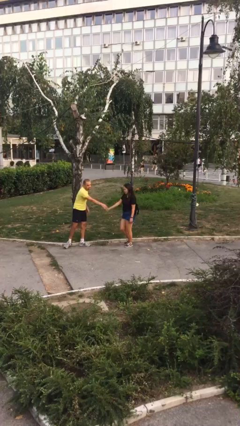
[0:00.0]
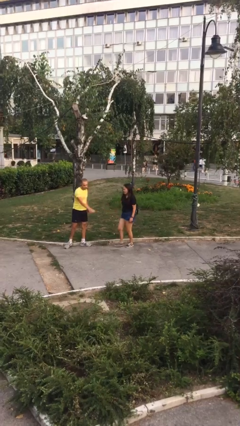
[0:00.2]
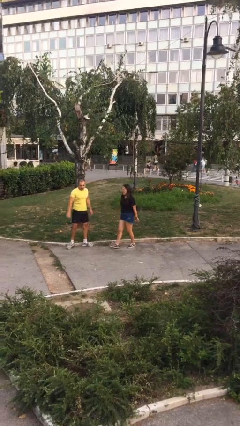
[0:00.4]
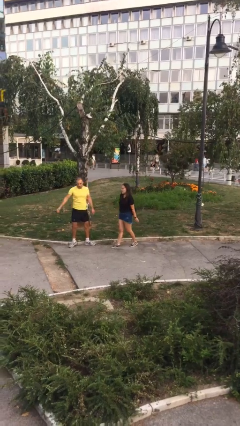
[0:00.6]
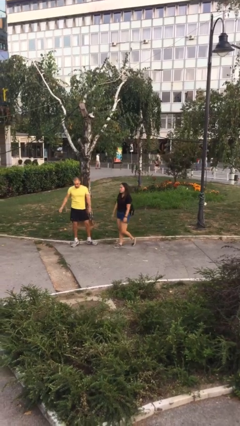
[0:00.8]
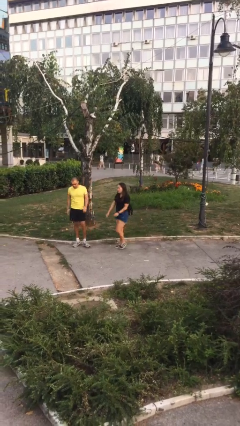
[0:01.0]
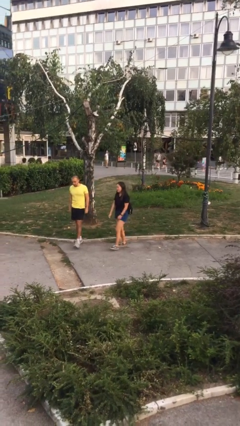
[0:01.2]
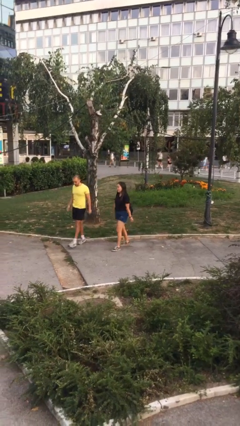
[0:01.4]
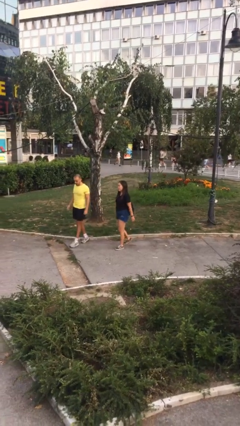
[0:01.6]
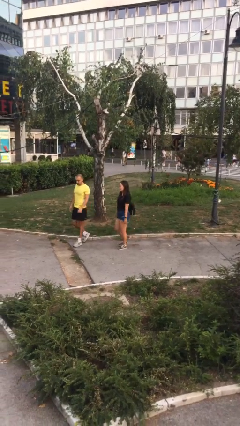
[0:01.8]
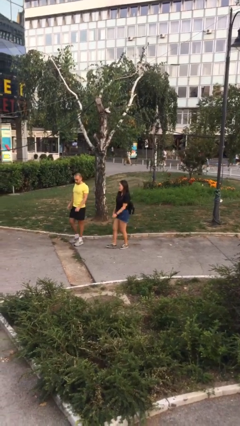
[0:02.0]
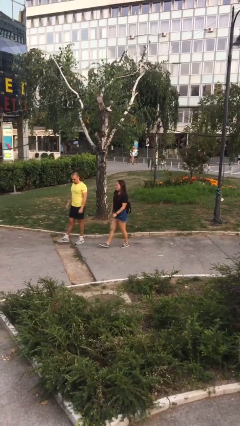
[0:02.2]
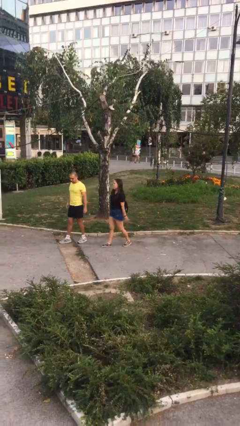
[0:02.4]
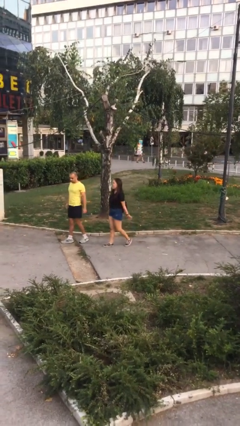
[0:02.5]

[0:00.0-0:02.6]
person talks to person

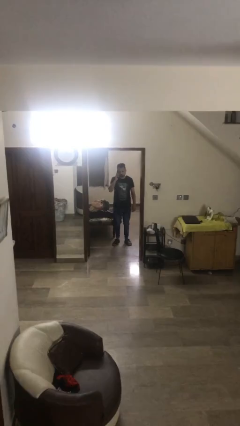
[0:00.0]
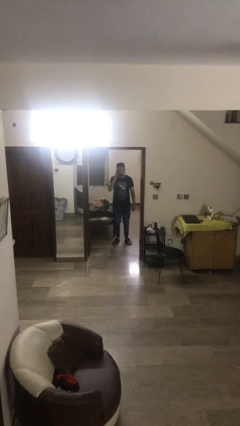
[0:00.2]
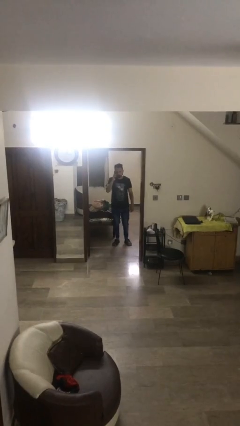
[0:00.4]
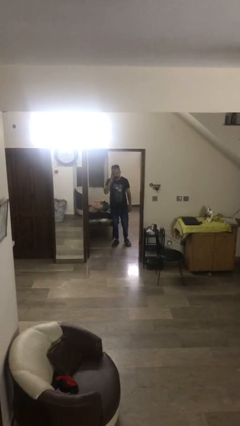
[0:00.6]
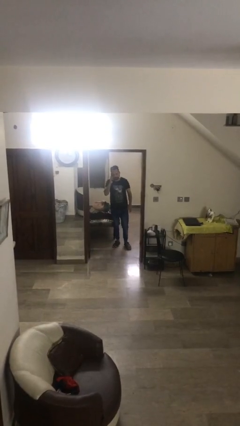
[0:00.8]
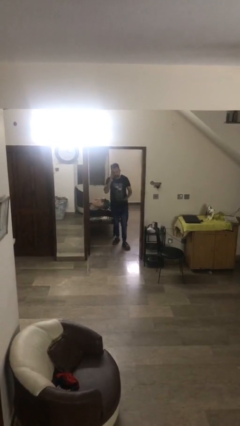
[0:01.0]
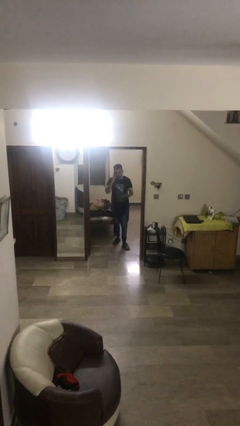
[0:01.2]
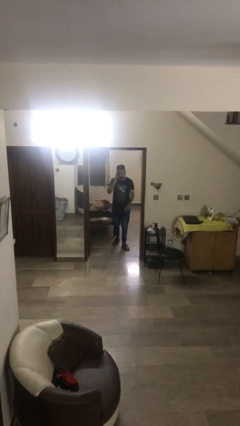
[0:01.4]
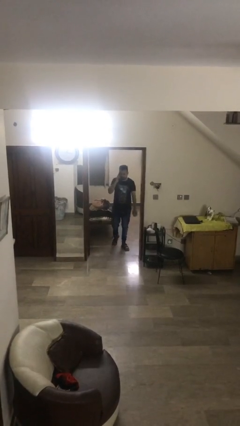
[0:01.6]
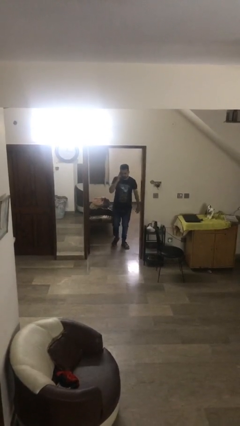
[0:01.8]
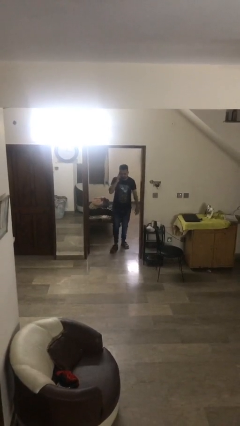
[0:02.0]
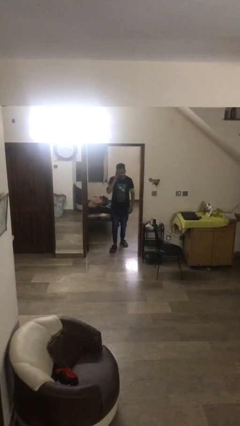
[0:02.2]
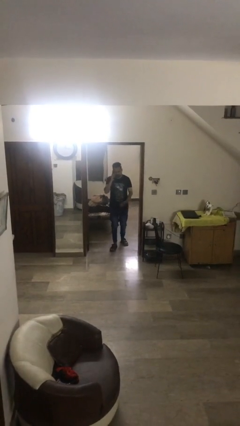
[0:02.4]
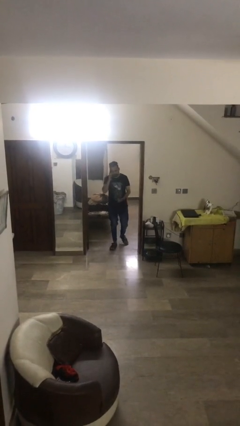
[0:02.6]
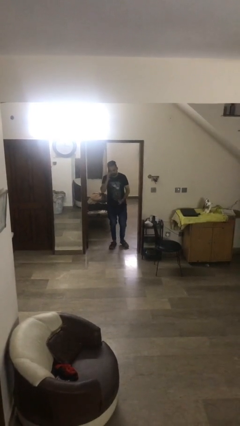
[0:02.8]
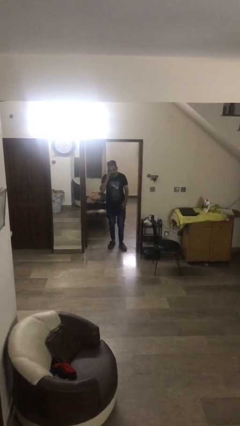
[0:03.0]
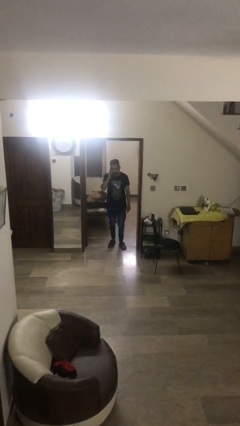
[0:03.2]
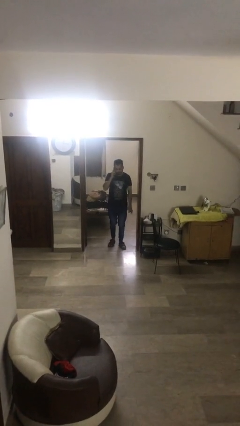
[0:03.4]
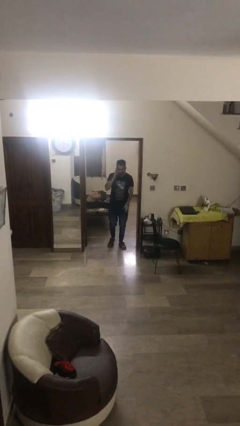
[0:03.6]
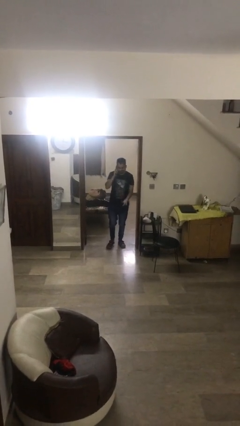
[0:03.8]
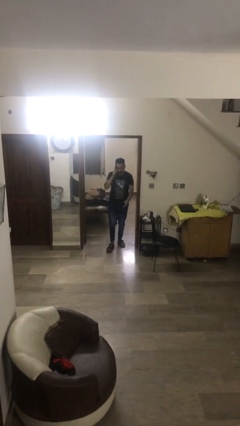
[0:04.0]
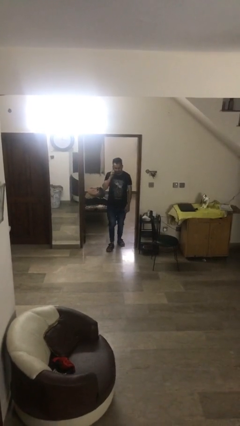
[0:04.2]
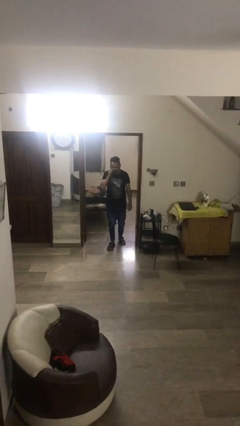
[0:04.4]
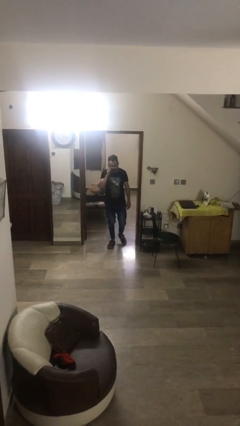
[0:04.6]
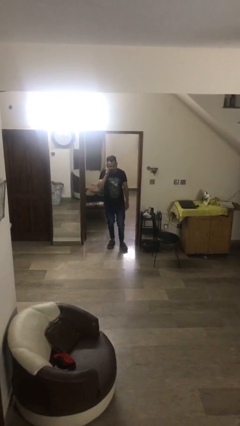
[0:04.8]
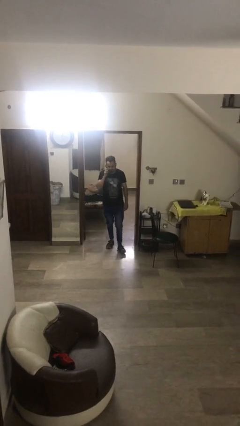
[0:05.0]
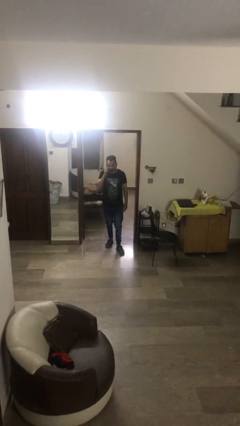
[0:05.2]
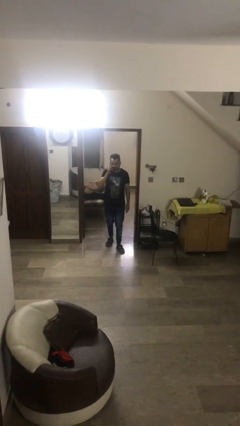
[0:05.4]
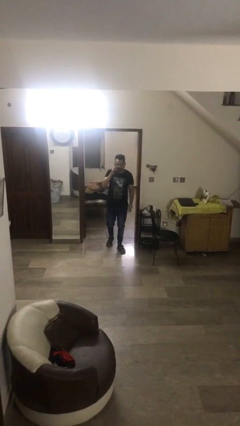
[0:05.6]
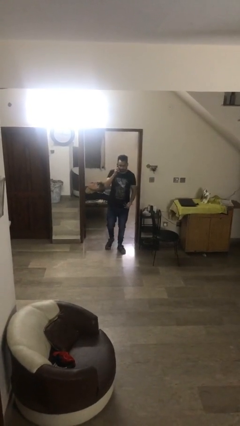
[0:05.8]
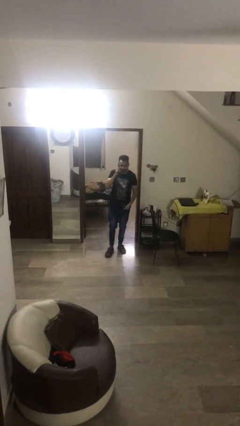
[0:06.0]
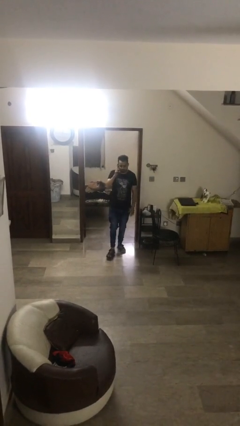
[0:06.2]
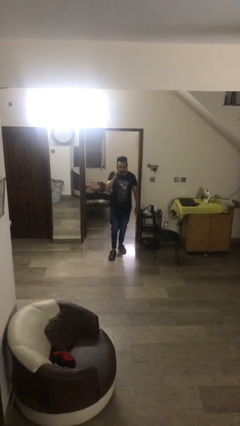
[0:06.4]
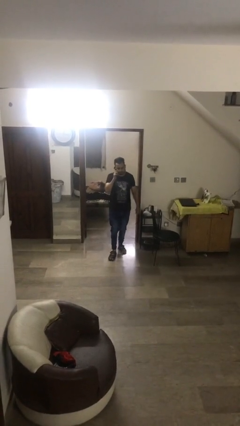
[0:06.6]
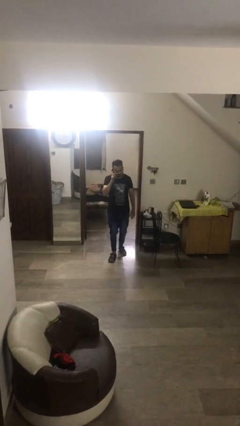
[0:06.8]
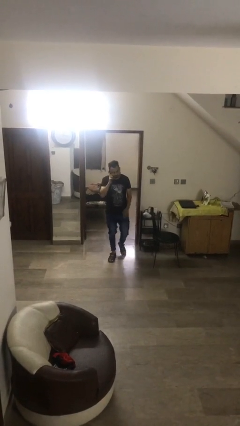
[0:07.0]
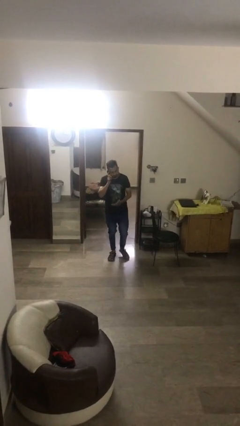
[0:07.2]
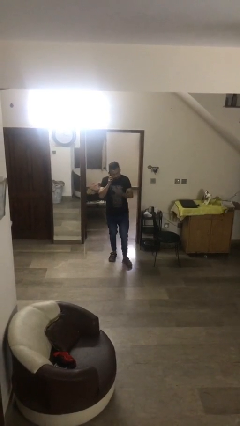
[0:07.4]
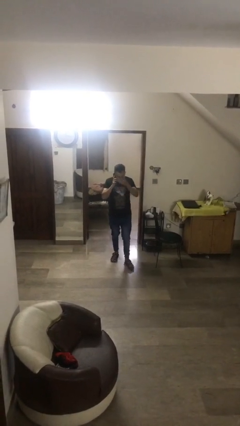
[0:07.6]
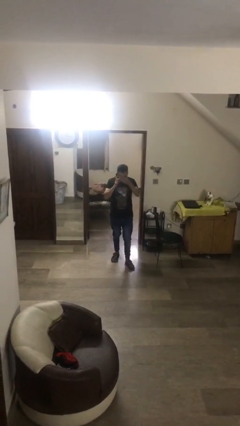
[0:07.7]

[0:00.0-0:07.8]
person enters scene through structure

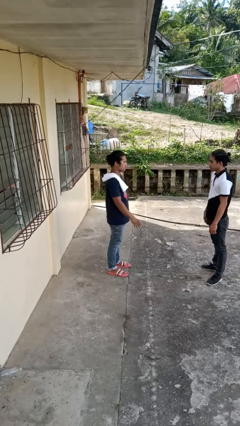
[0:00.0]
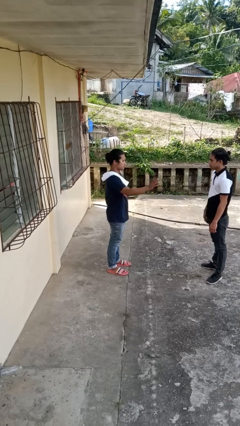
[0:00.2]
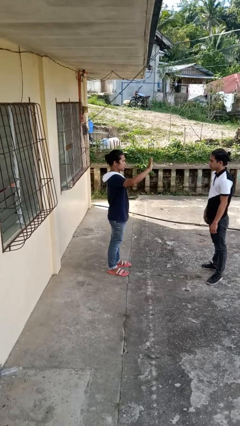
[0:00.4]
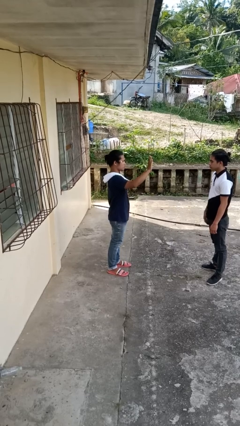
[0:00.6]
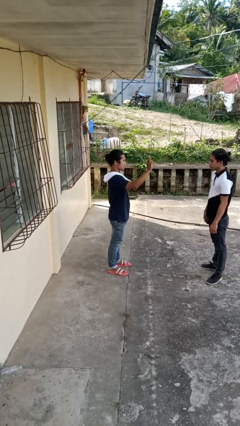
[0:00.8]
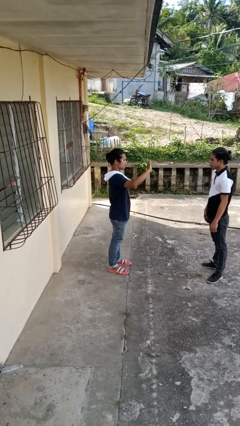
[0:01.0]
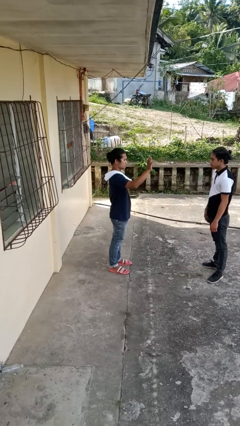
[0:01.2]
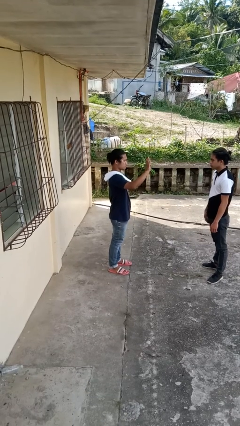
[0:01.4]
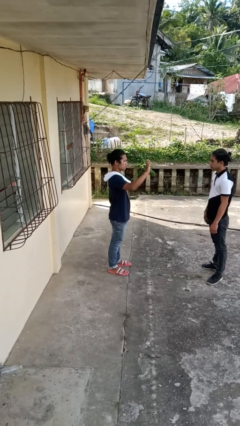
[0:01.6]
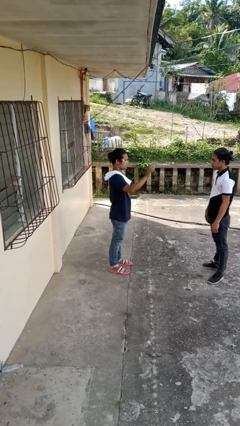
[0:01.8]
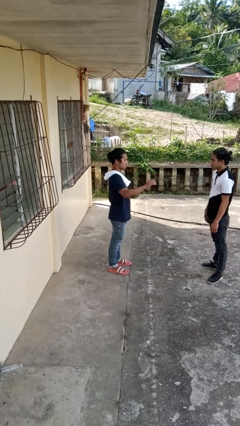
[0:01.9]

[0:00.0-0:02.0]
person waves at person

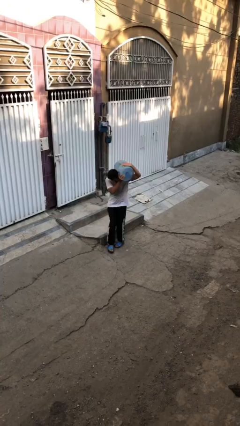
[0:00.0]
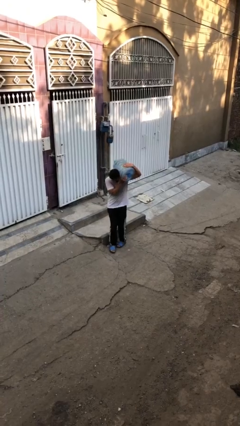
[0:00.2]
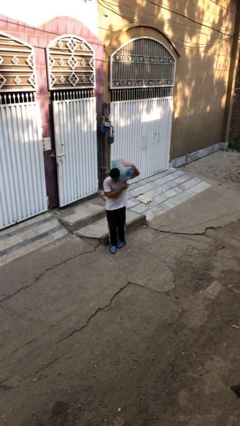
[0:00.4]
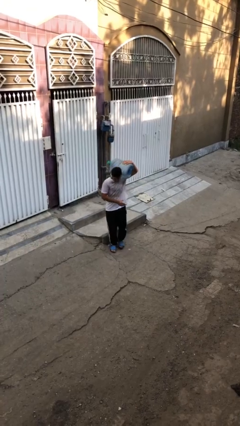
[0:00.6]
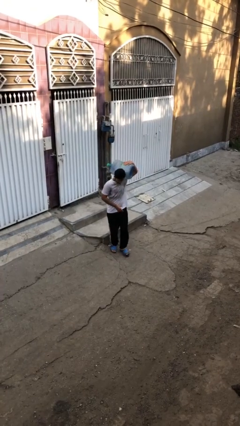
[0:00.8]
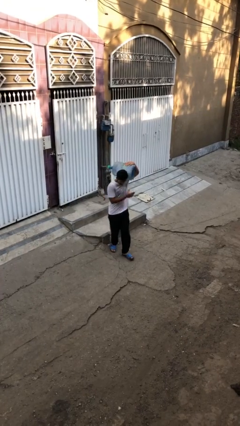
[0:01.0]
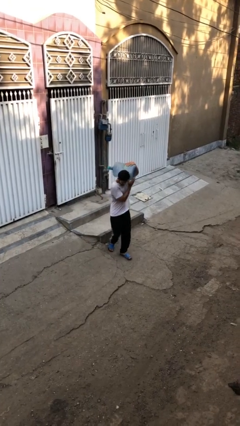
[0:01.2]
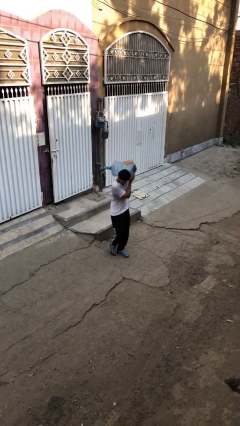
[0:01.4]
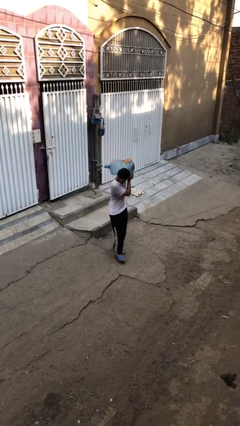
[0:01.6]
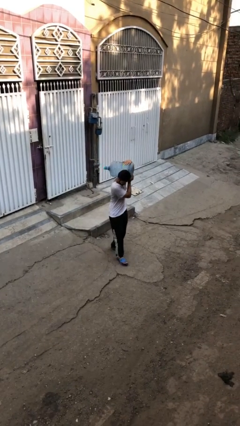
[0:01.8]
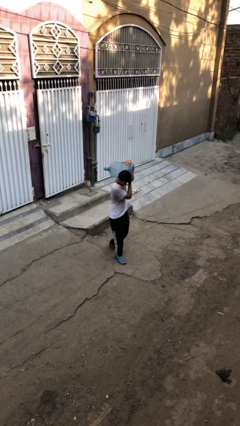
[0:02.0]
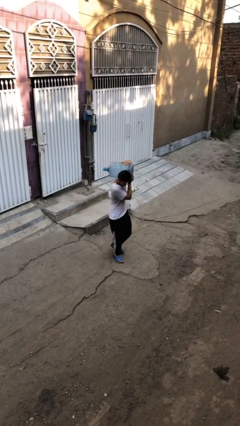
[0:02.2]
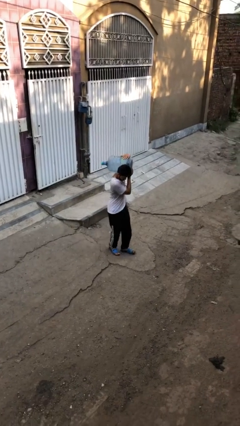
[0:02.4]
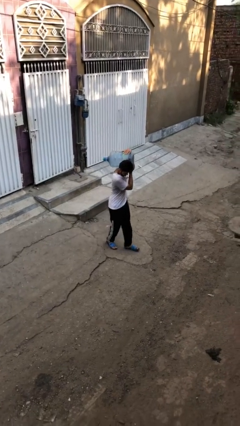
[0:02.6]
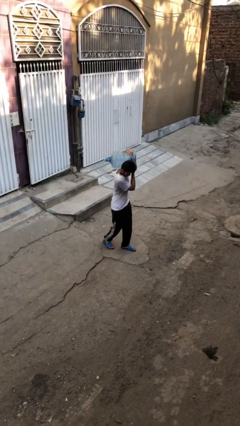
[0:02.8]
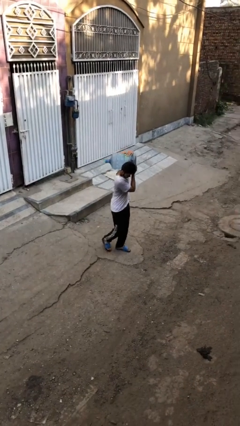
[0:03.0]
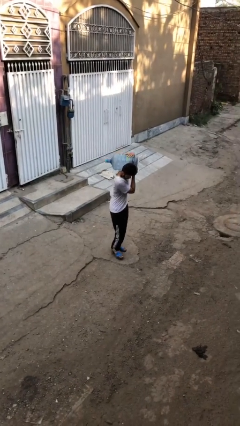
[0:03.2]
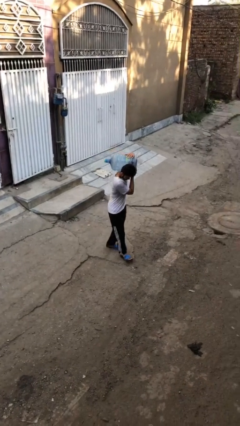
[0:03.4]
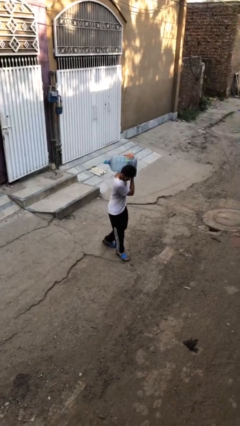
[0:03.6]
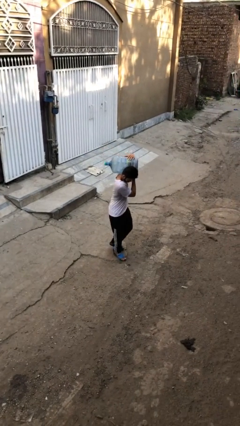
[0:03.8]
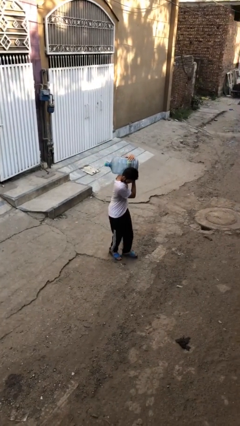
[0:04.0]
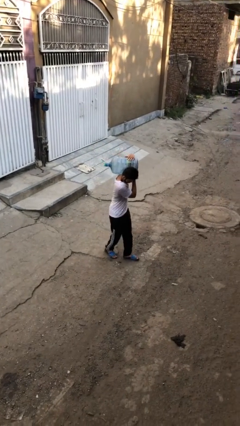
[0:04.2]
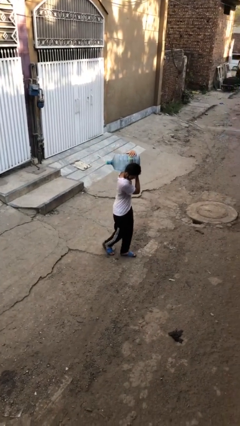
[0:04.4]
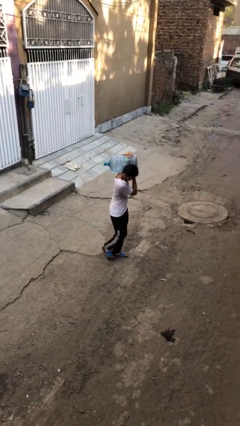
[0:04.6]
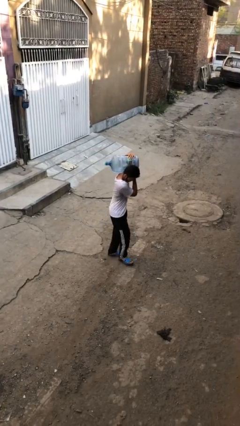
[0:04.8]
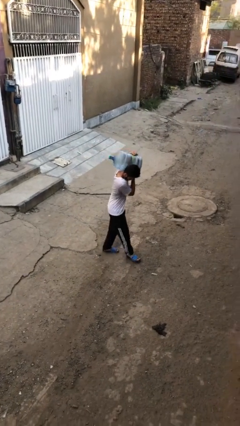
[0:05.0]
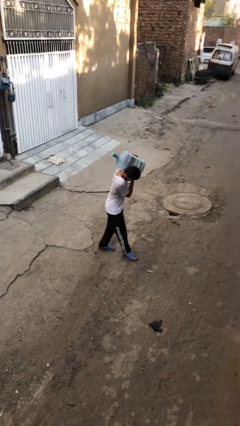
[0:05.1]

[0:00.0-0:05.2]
person carries heavy object
